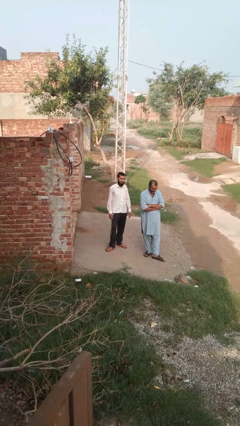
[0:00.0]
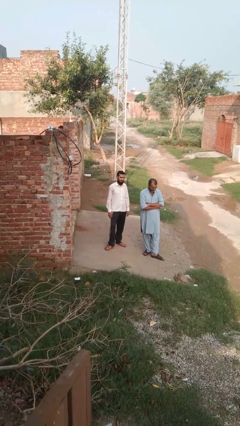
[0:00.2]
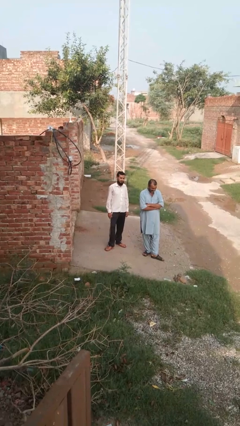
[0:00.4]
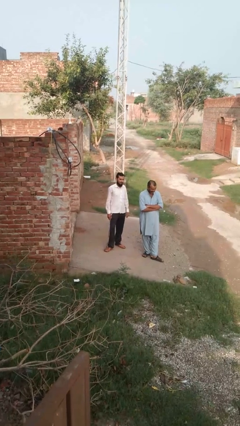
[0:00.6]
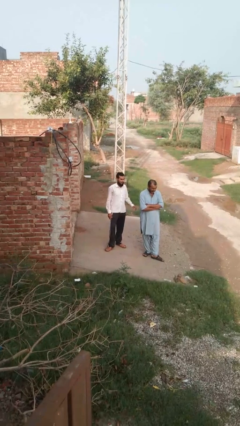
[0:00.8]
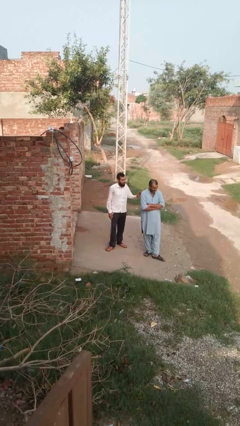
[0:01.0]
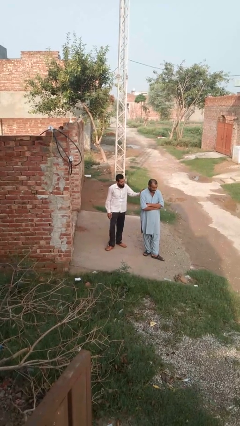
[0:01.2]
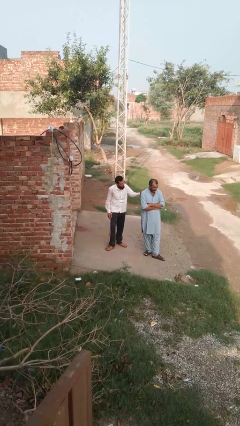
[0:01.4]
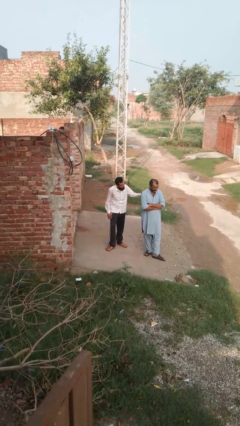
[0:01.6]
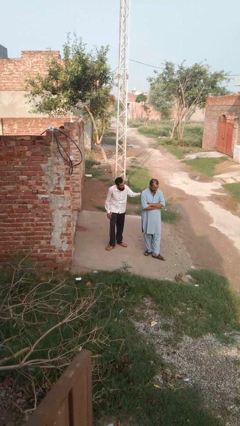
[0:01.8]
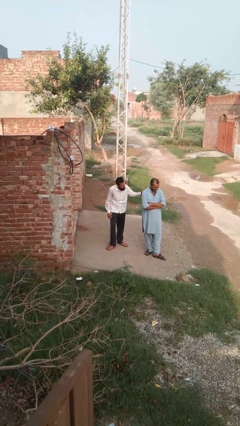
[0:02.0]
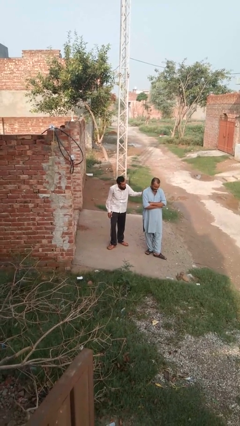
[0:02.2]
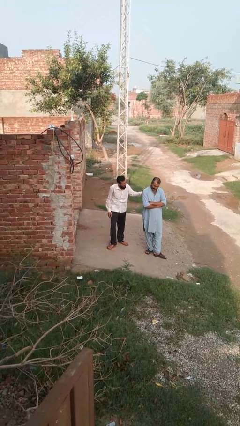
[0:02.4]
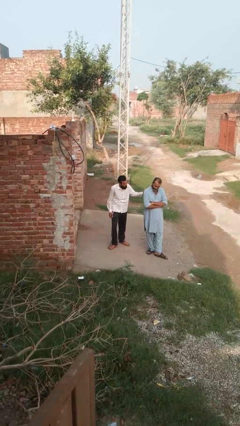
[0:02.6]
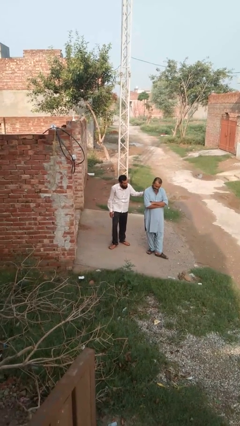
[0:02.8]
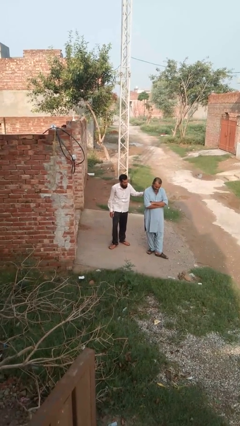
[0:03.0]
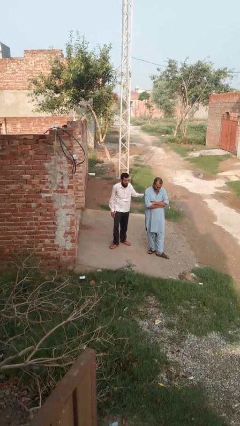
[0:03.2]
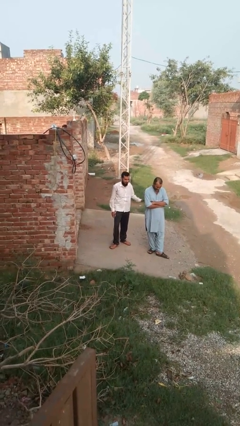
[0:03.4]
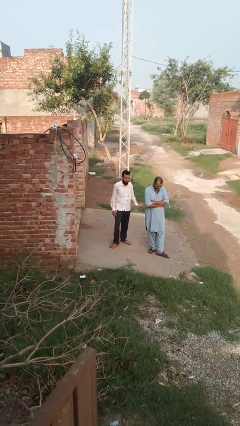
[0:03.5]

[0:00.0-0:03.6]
person pounds shoulders of person

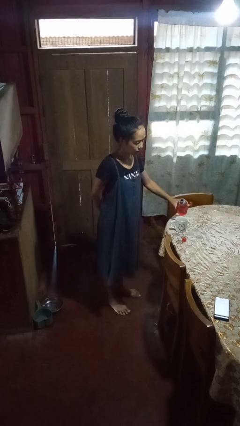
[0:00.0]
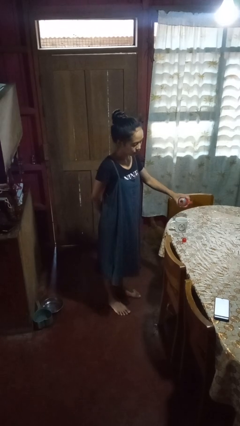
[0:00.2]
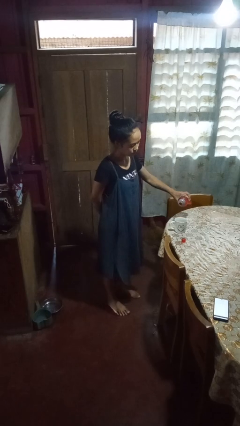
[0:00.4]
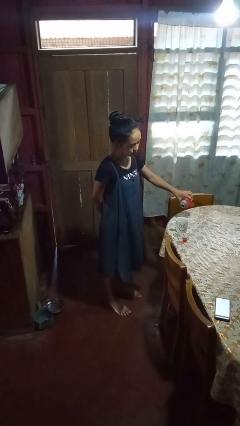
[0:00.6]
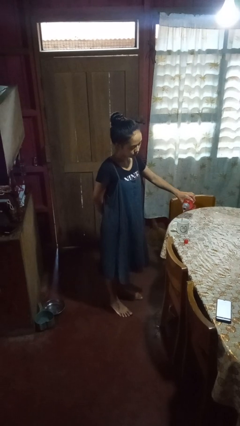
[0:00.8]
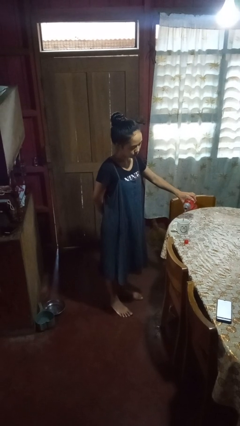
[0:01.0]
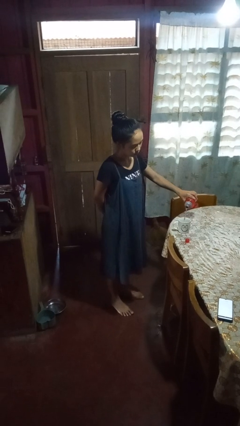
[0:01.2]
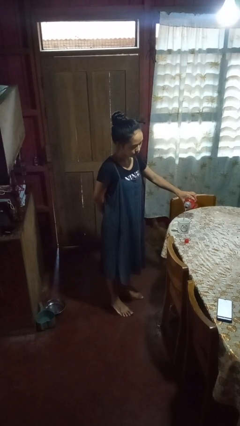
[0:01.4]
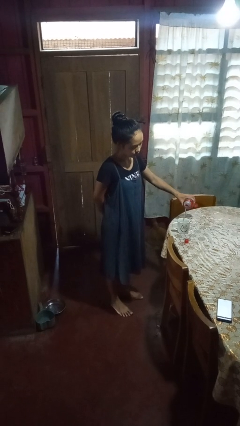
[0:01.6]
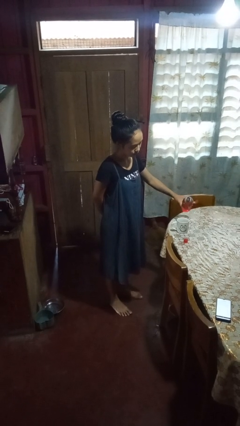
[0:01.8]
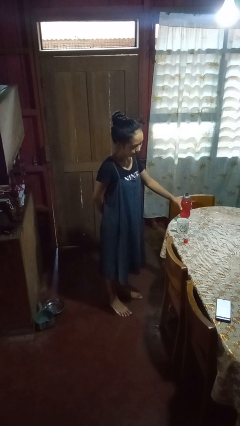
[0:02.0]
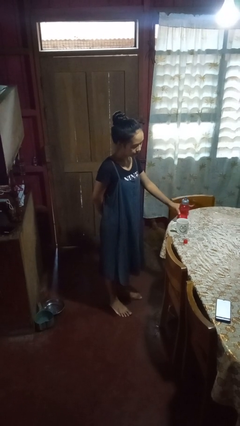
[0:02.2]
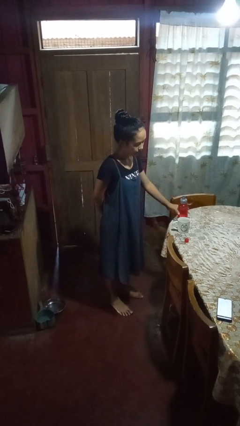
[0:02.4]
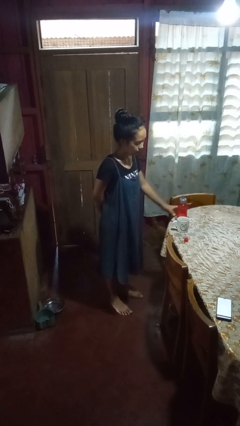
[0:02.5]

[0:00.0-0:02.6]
person pours liquid into cup

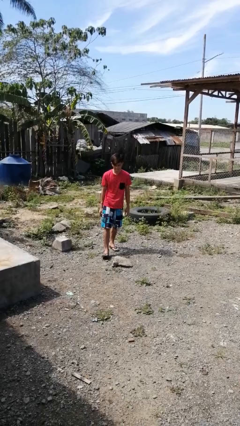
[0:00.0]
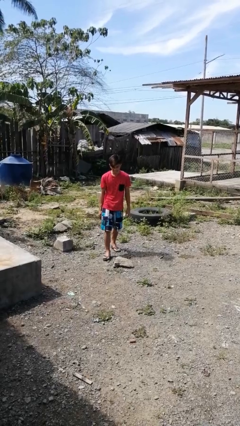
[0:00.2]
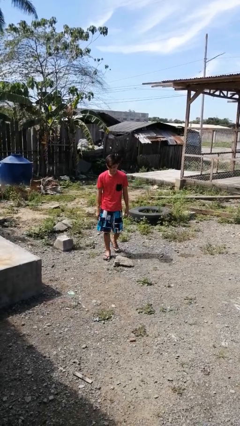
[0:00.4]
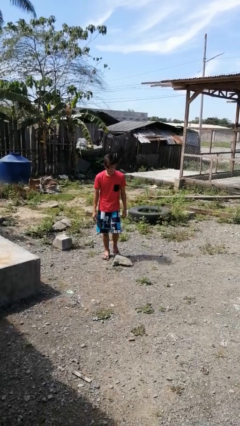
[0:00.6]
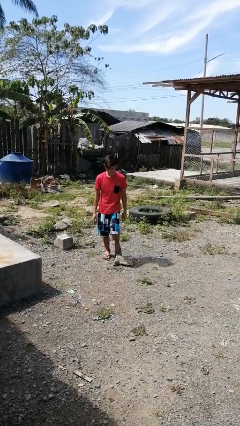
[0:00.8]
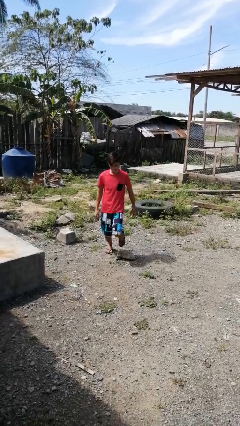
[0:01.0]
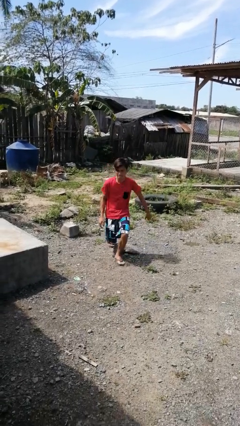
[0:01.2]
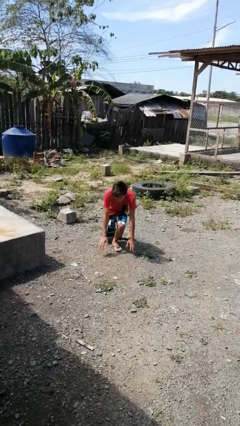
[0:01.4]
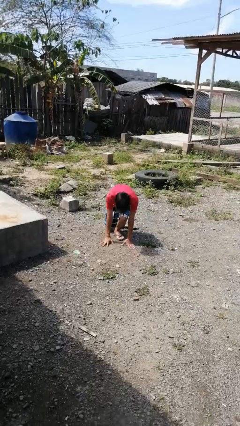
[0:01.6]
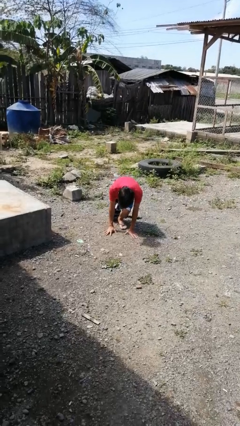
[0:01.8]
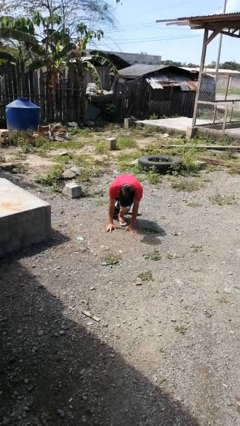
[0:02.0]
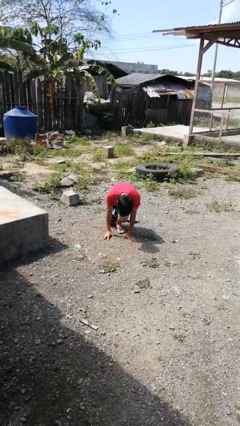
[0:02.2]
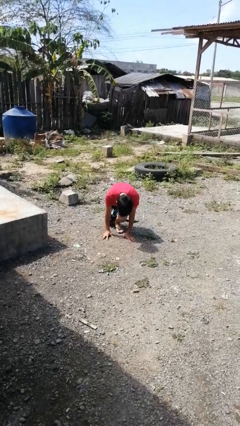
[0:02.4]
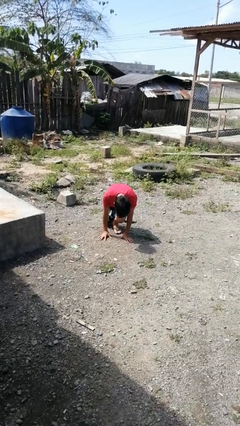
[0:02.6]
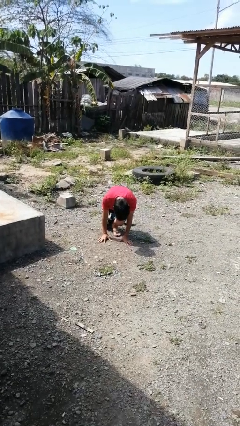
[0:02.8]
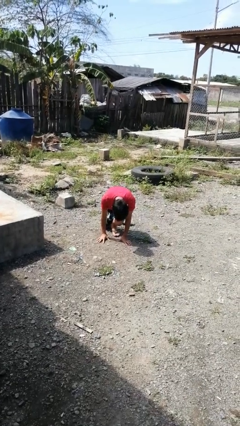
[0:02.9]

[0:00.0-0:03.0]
person trips on object on floor

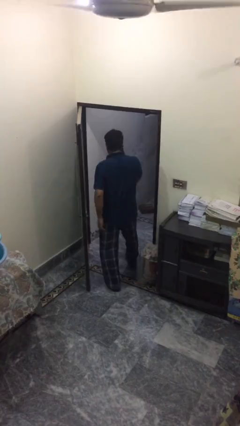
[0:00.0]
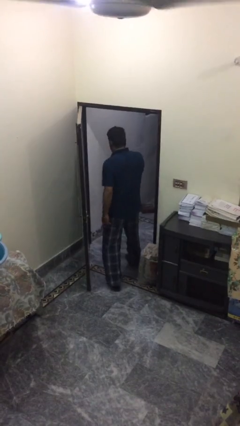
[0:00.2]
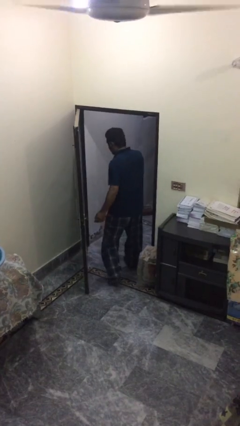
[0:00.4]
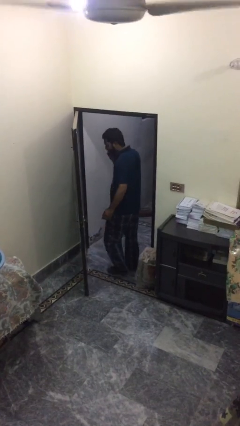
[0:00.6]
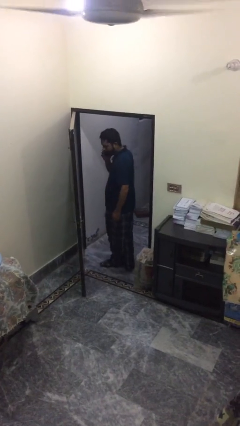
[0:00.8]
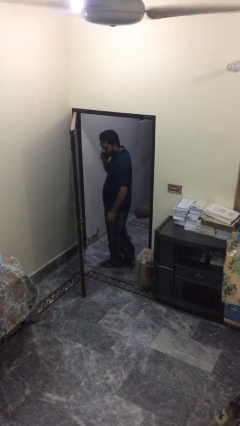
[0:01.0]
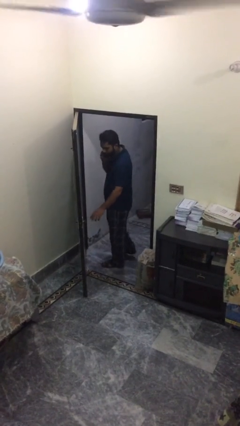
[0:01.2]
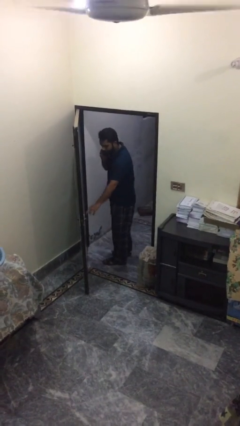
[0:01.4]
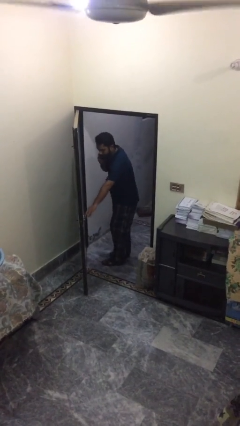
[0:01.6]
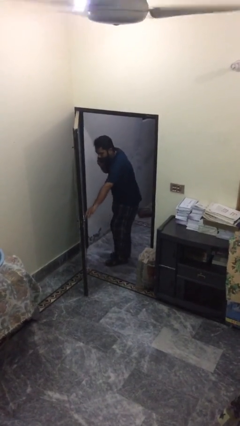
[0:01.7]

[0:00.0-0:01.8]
person exits scene through structure

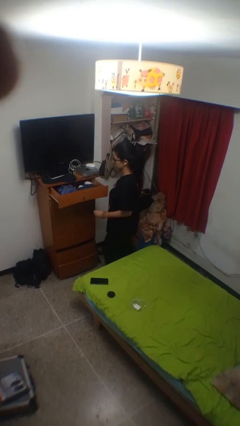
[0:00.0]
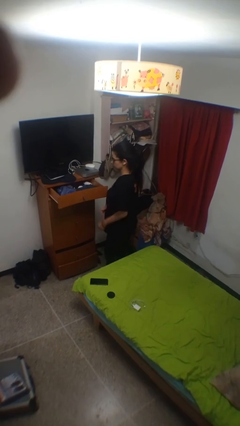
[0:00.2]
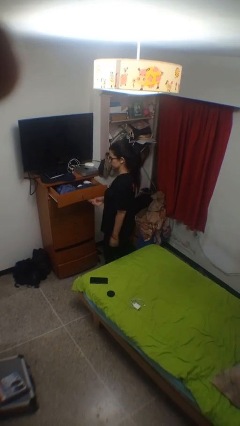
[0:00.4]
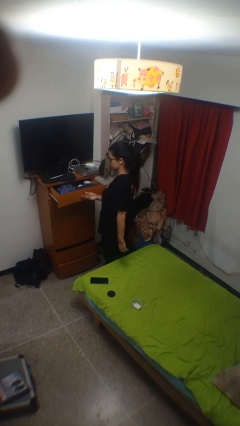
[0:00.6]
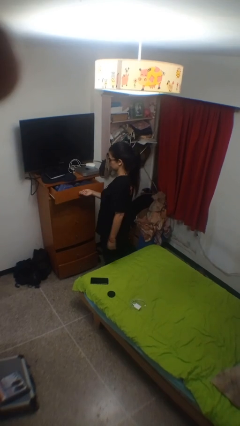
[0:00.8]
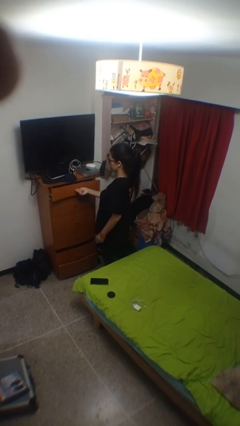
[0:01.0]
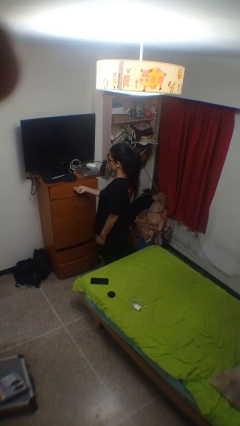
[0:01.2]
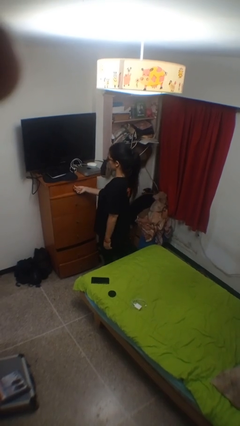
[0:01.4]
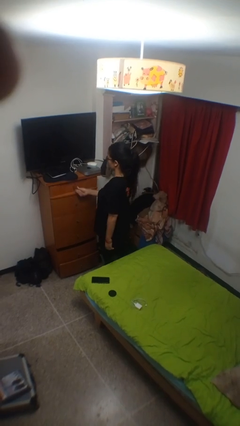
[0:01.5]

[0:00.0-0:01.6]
person closes dresser drawer

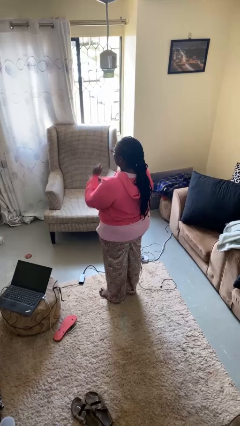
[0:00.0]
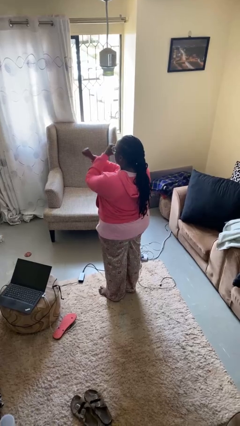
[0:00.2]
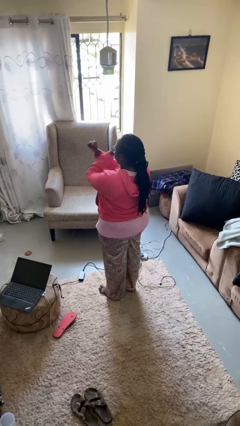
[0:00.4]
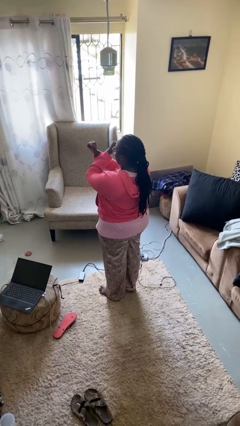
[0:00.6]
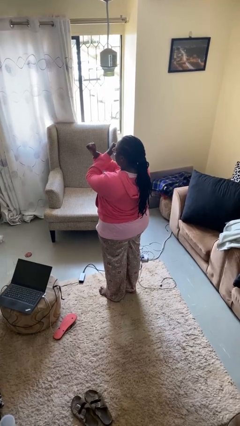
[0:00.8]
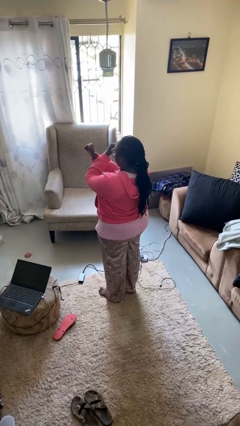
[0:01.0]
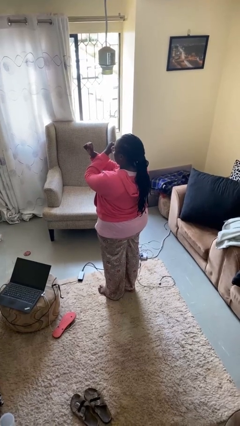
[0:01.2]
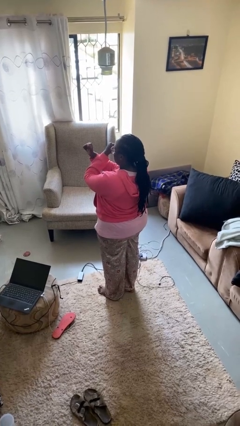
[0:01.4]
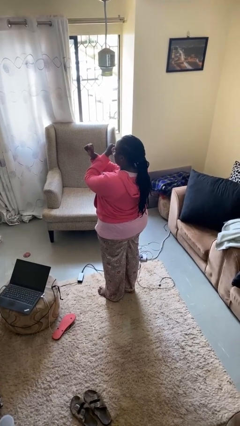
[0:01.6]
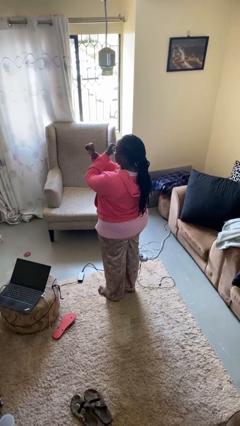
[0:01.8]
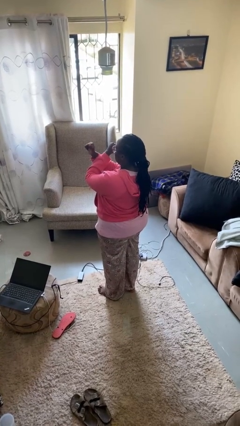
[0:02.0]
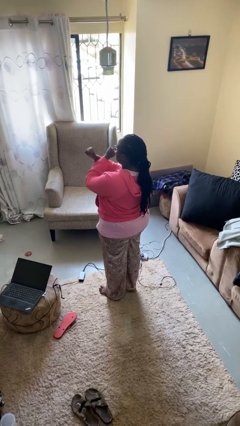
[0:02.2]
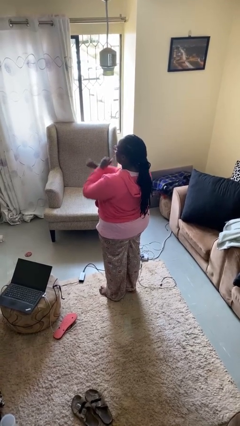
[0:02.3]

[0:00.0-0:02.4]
person gestures arms x

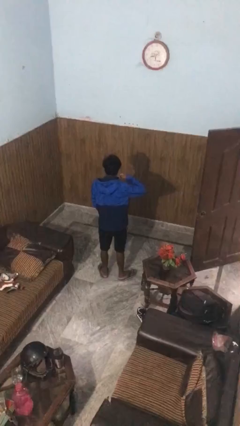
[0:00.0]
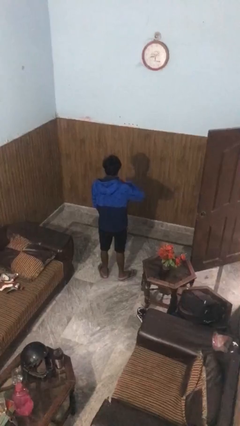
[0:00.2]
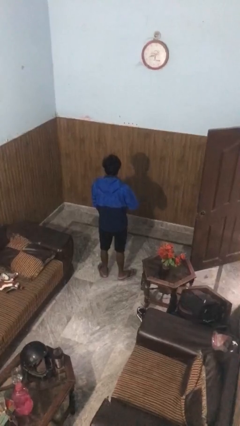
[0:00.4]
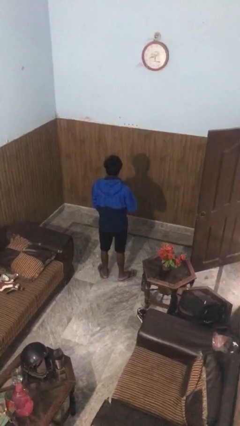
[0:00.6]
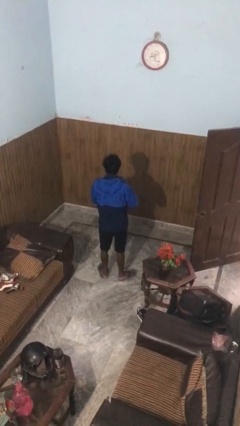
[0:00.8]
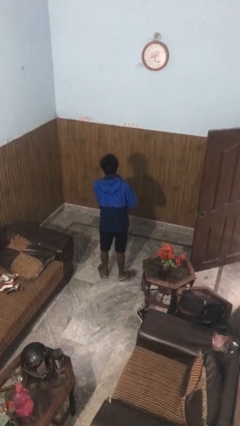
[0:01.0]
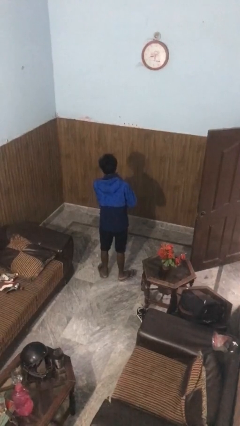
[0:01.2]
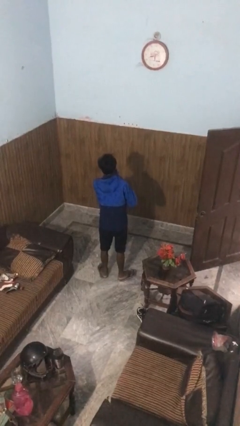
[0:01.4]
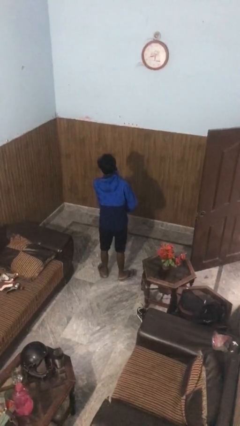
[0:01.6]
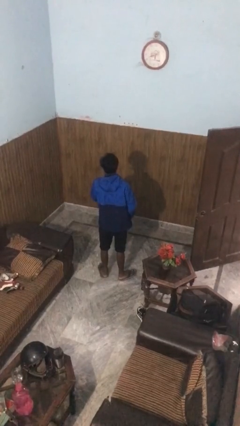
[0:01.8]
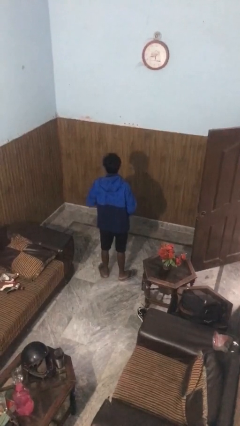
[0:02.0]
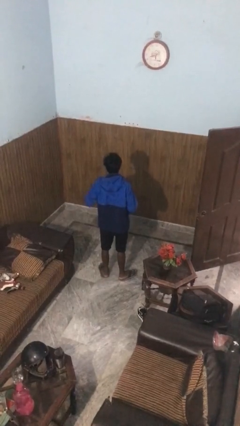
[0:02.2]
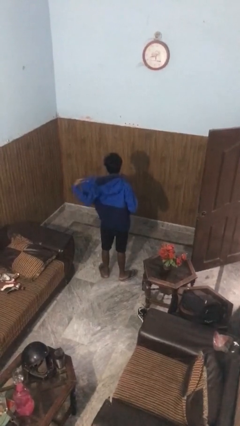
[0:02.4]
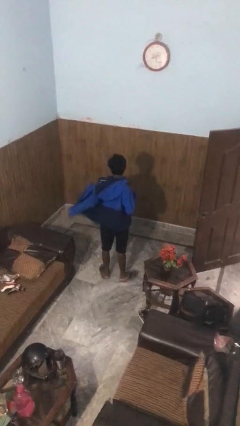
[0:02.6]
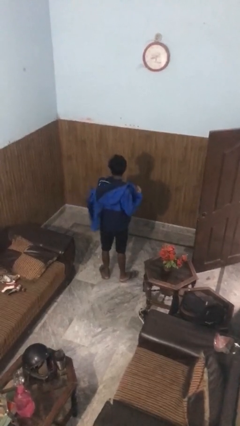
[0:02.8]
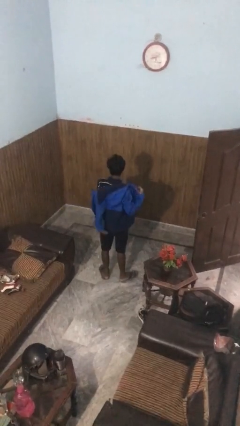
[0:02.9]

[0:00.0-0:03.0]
person unzips jacket
